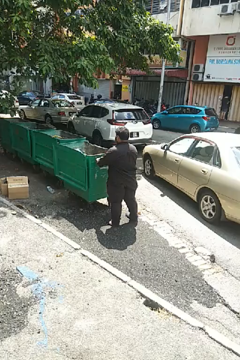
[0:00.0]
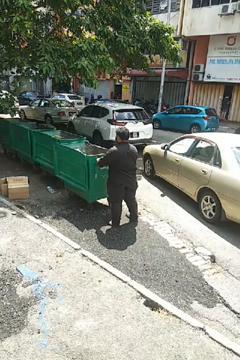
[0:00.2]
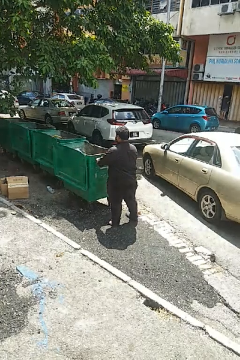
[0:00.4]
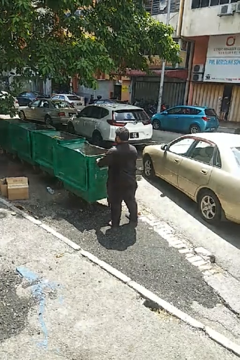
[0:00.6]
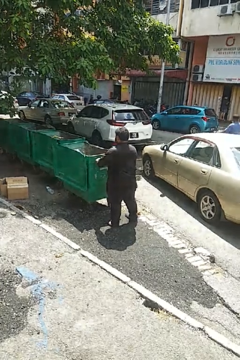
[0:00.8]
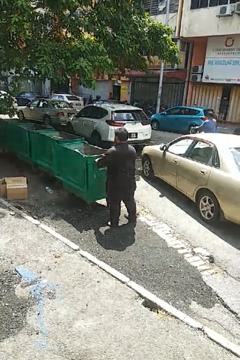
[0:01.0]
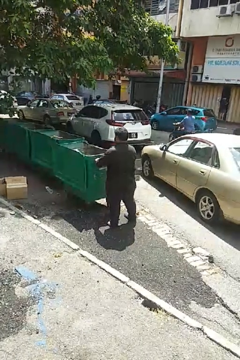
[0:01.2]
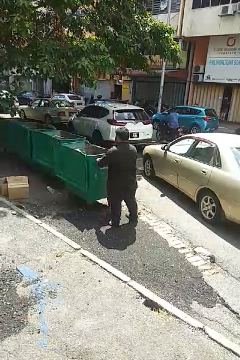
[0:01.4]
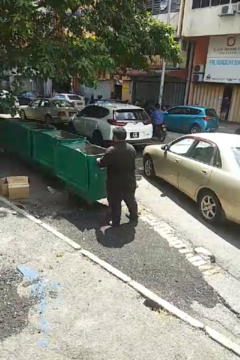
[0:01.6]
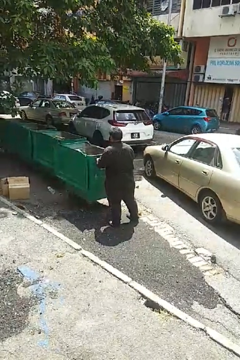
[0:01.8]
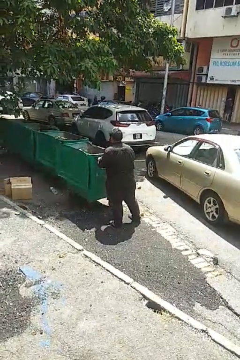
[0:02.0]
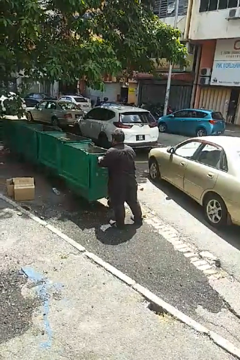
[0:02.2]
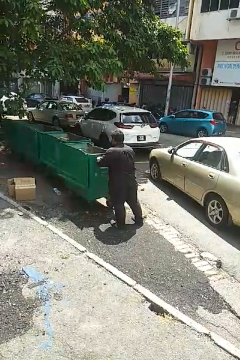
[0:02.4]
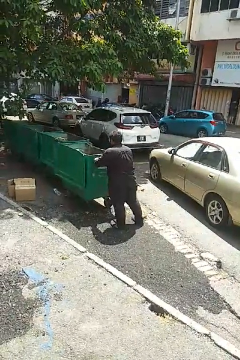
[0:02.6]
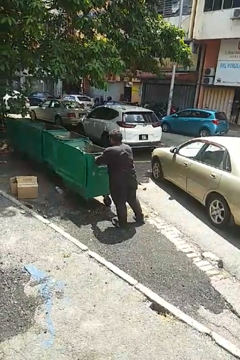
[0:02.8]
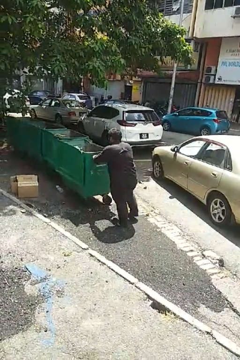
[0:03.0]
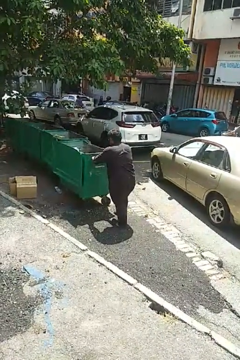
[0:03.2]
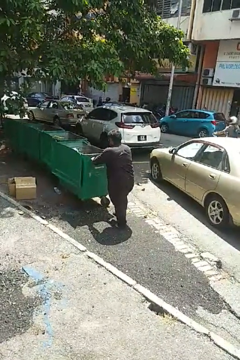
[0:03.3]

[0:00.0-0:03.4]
person pushes wheeled trashcan

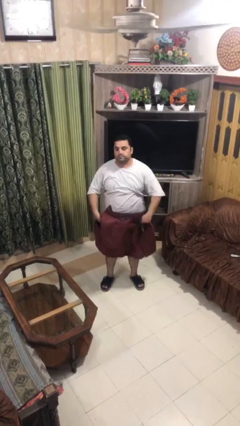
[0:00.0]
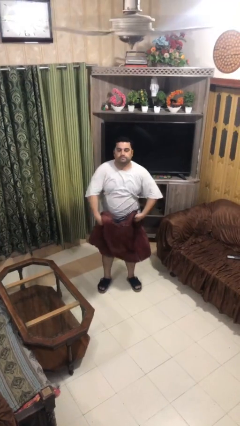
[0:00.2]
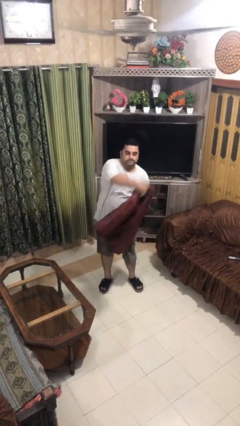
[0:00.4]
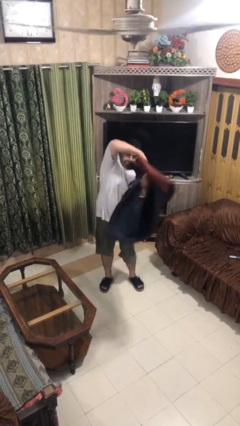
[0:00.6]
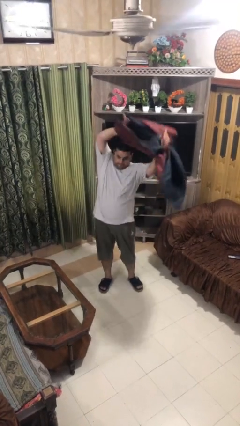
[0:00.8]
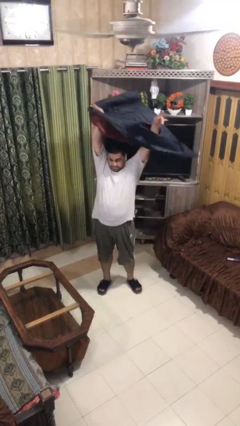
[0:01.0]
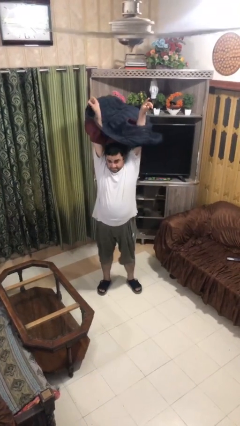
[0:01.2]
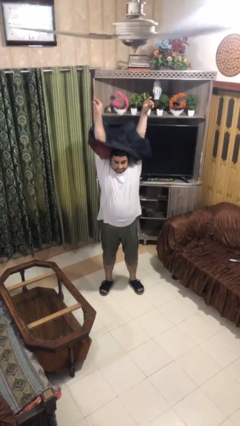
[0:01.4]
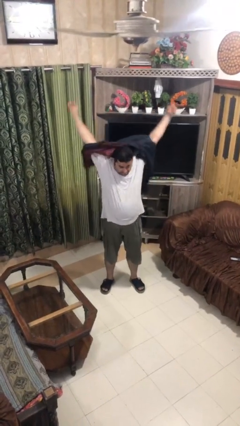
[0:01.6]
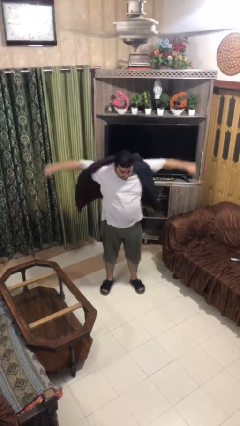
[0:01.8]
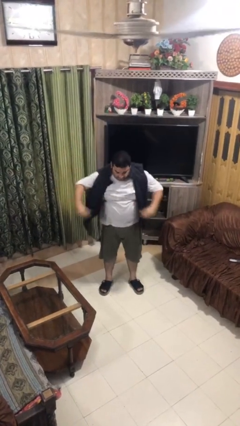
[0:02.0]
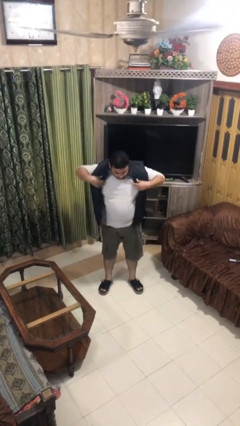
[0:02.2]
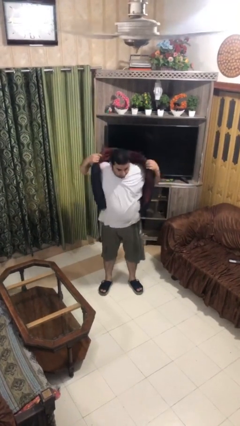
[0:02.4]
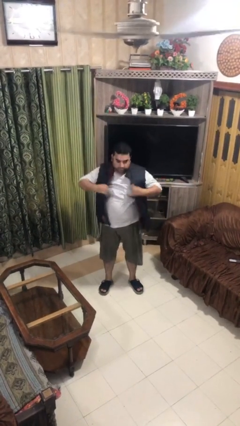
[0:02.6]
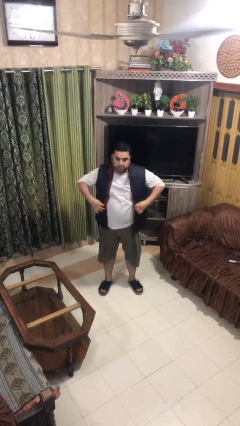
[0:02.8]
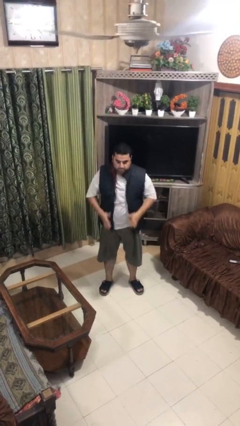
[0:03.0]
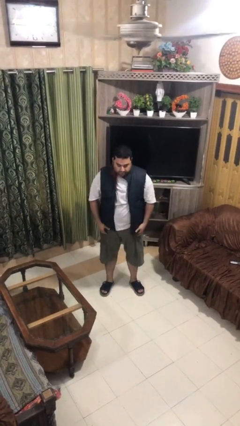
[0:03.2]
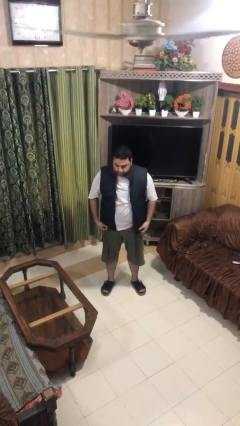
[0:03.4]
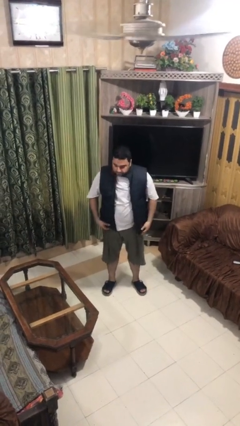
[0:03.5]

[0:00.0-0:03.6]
person puts on jacket

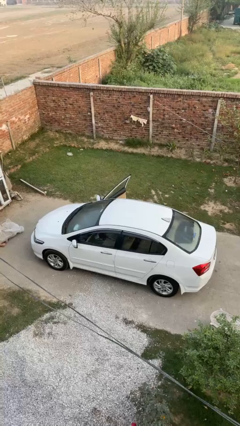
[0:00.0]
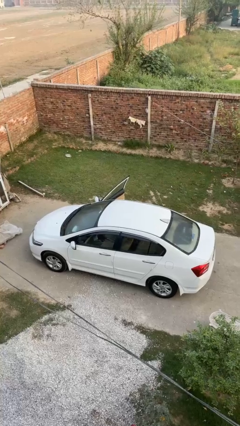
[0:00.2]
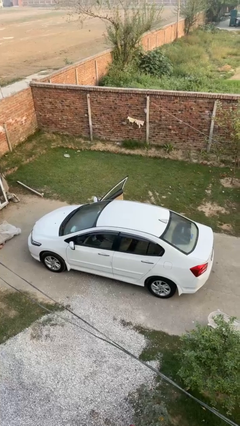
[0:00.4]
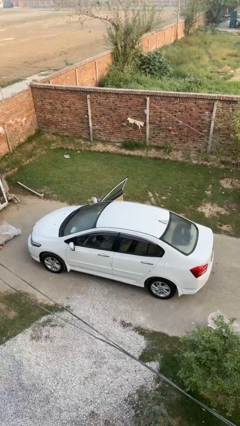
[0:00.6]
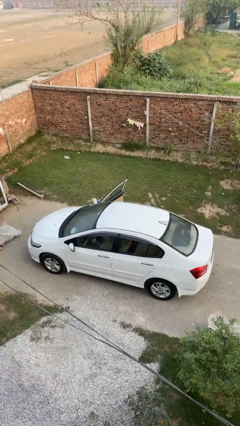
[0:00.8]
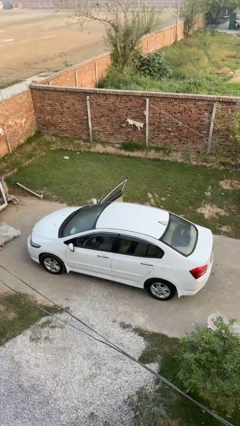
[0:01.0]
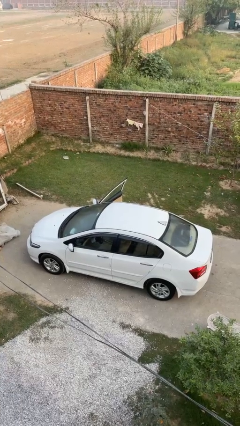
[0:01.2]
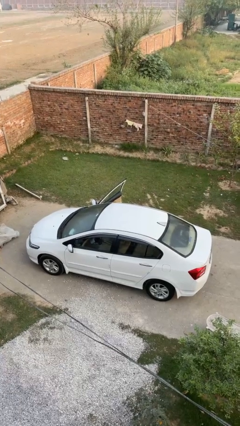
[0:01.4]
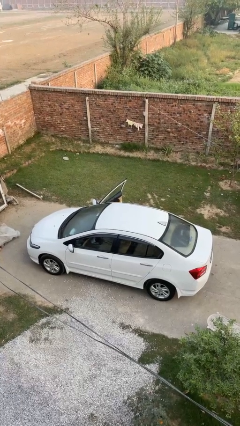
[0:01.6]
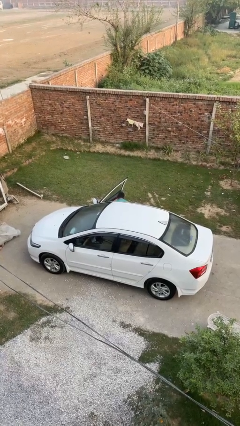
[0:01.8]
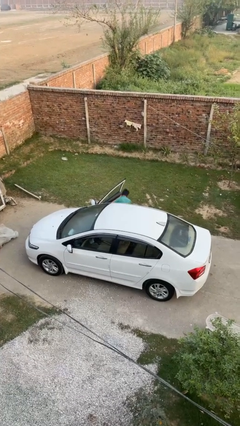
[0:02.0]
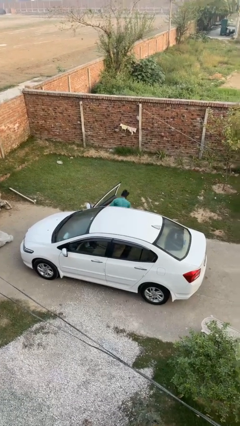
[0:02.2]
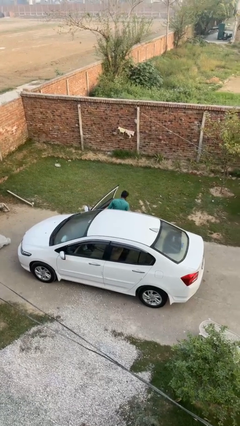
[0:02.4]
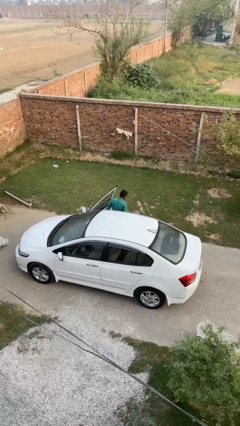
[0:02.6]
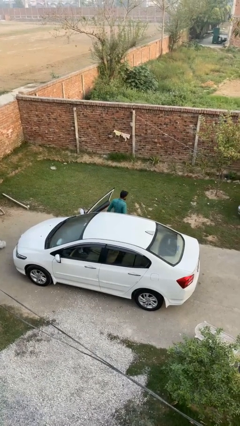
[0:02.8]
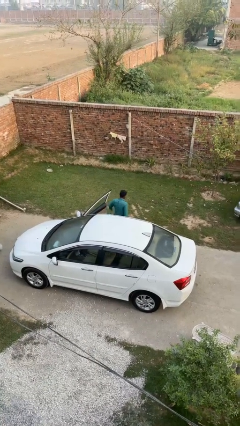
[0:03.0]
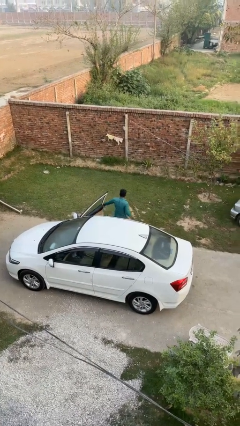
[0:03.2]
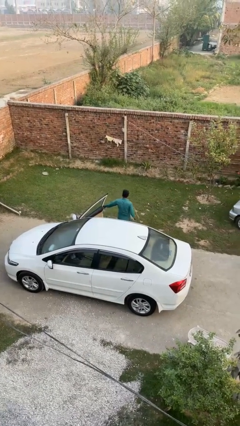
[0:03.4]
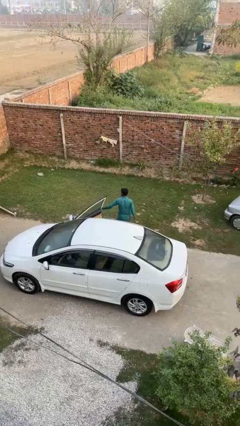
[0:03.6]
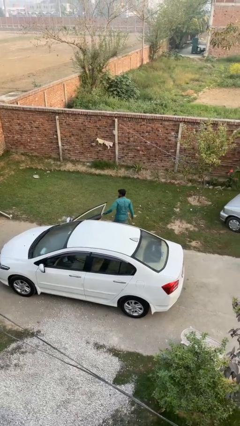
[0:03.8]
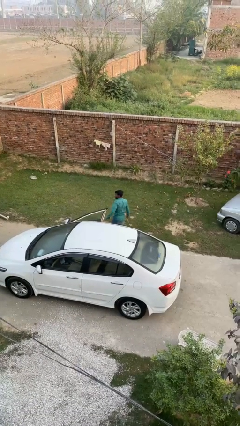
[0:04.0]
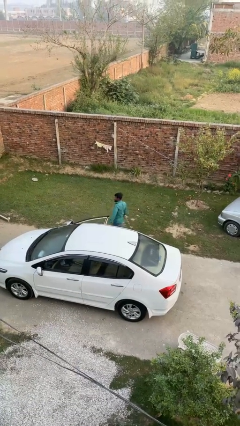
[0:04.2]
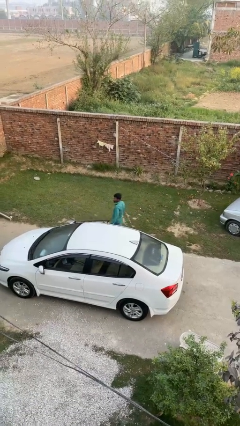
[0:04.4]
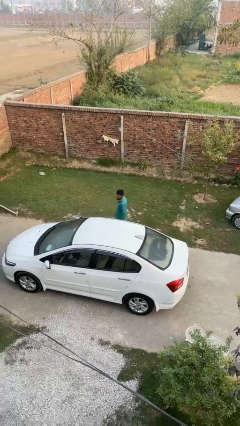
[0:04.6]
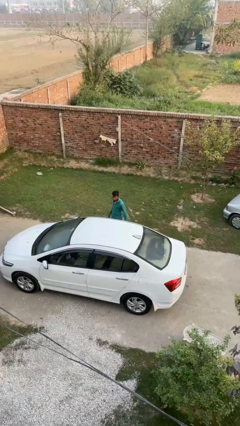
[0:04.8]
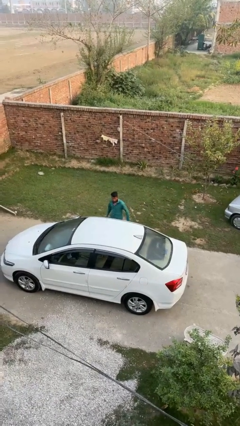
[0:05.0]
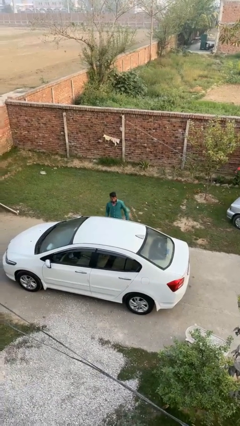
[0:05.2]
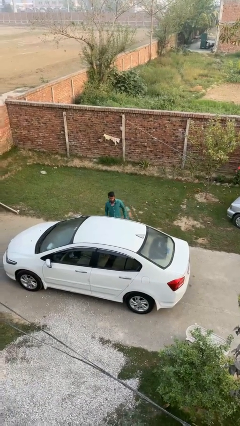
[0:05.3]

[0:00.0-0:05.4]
person exits car

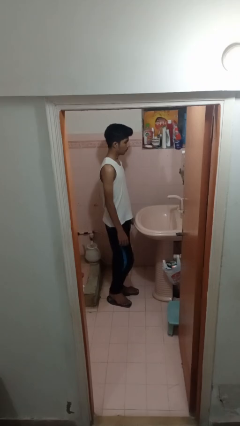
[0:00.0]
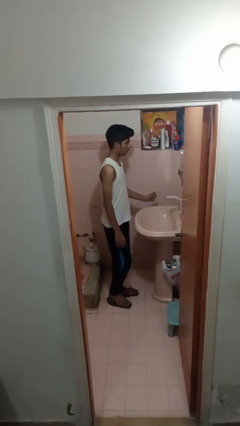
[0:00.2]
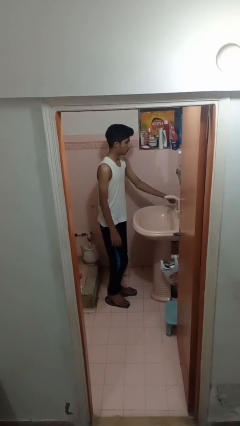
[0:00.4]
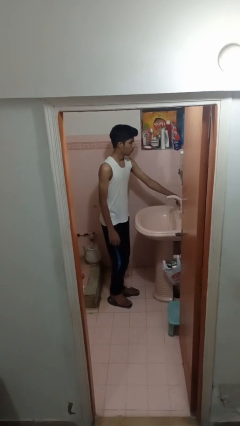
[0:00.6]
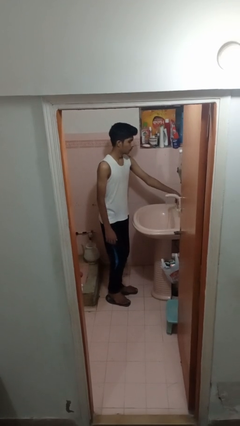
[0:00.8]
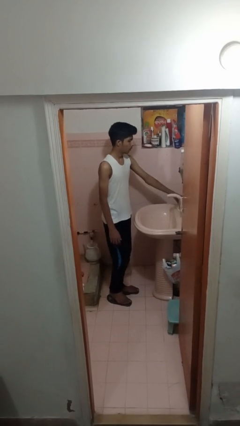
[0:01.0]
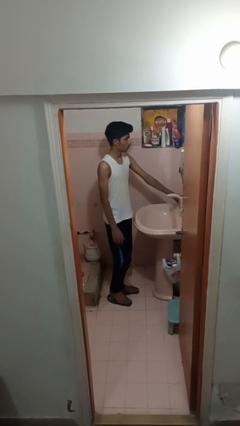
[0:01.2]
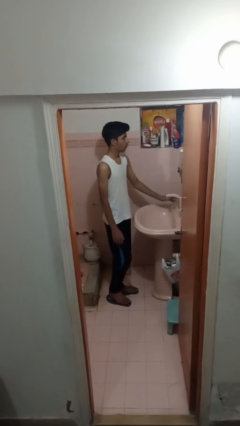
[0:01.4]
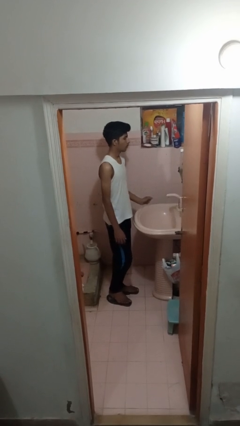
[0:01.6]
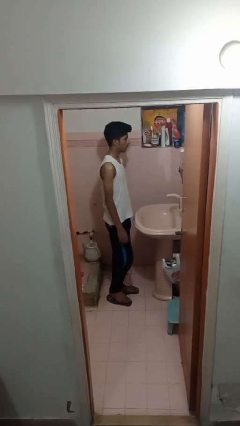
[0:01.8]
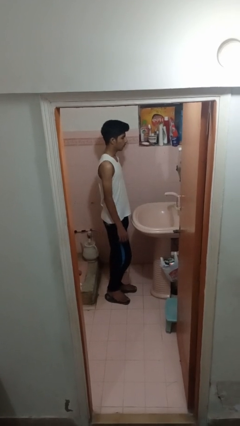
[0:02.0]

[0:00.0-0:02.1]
person turns off faucet

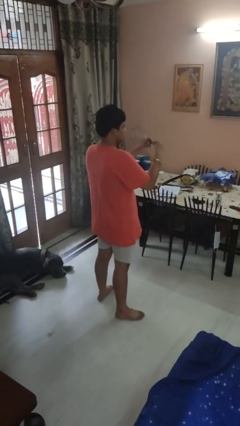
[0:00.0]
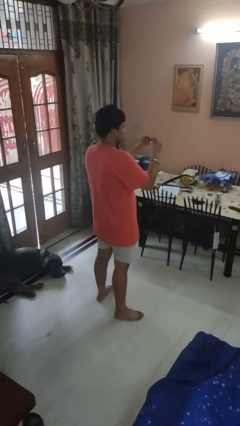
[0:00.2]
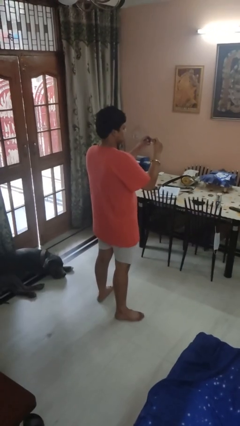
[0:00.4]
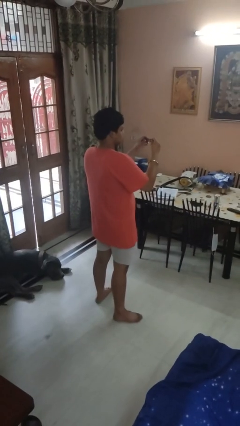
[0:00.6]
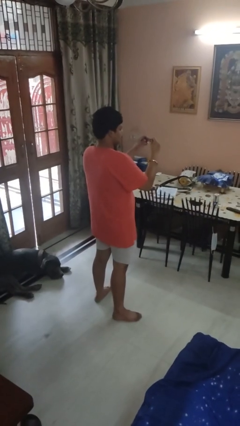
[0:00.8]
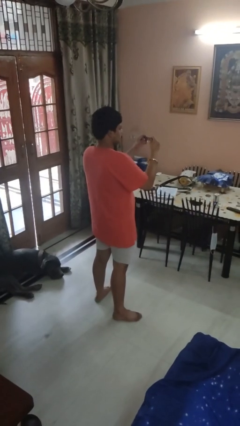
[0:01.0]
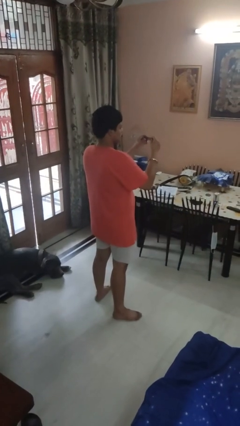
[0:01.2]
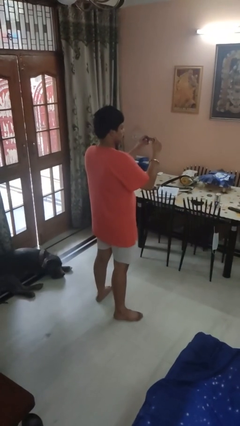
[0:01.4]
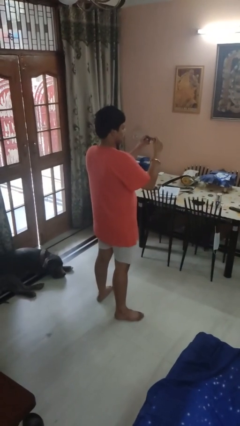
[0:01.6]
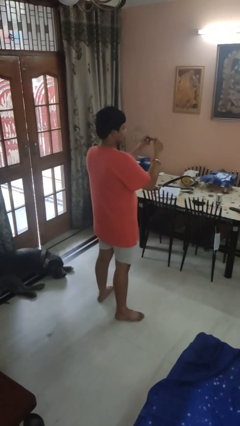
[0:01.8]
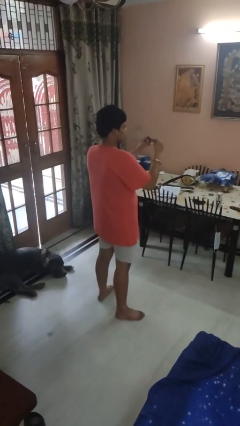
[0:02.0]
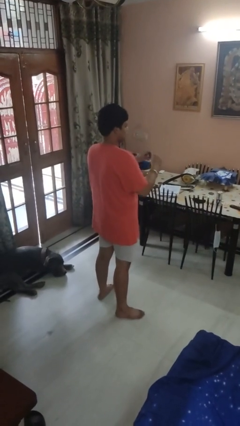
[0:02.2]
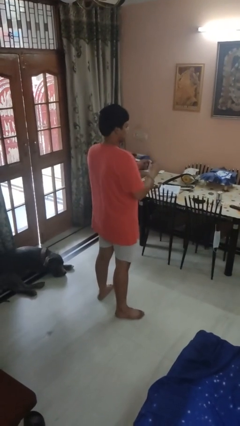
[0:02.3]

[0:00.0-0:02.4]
person clips fingernails

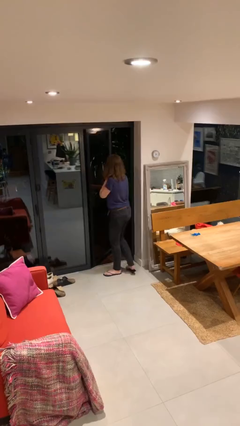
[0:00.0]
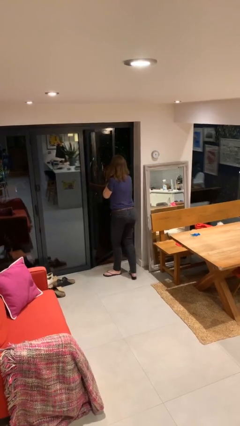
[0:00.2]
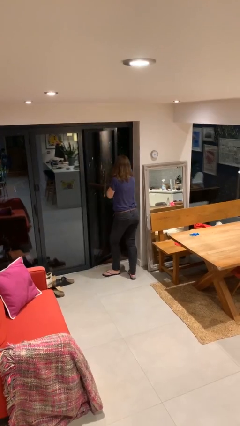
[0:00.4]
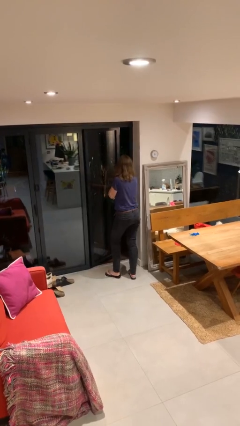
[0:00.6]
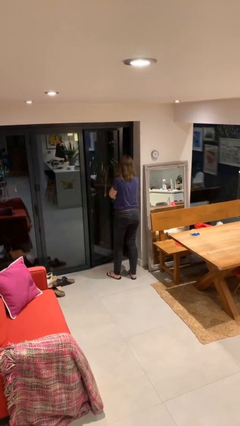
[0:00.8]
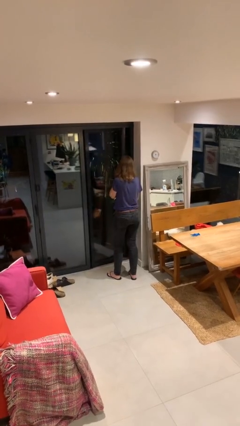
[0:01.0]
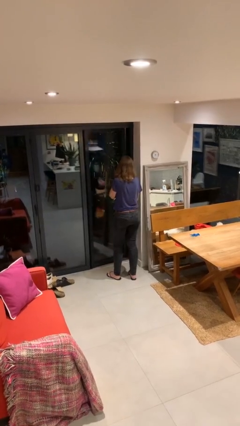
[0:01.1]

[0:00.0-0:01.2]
person closes facility door
